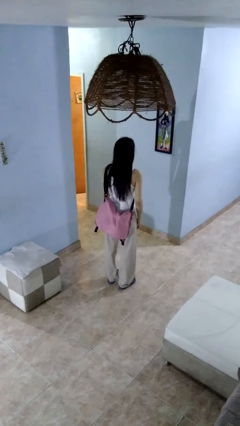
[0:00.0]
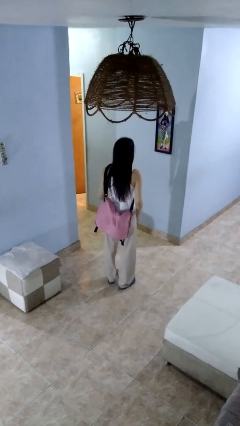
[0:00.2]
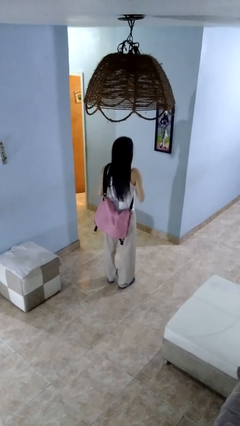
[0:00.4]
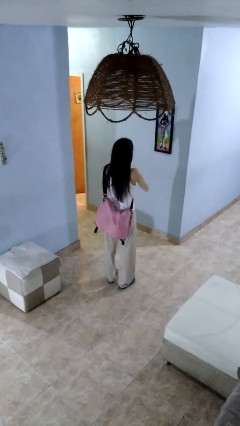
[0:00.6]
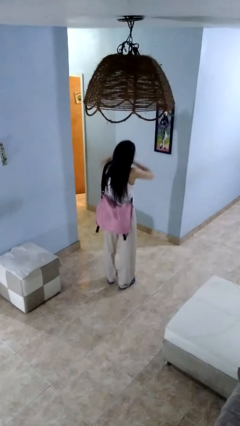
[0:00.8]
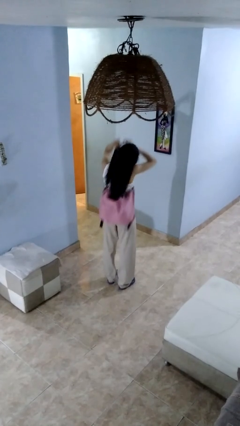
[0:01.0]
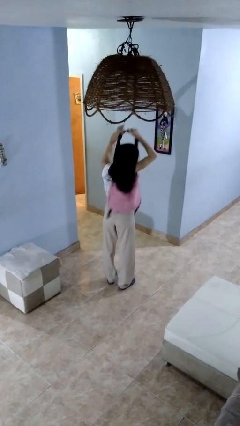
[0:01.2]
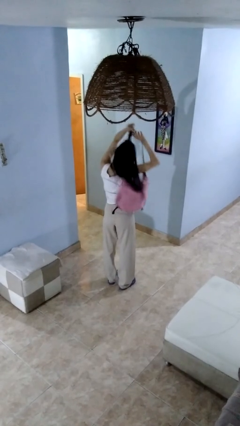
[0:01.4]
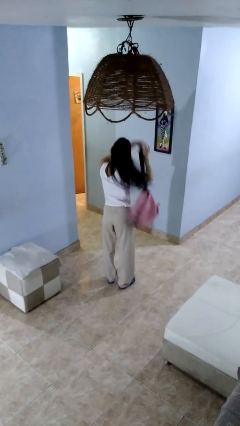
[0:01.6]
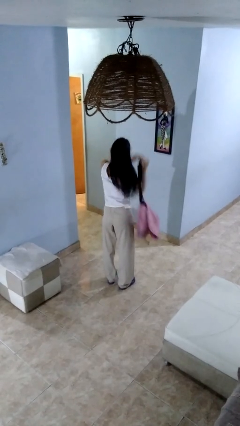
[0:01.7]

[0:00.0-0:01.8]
person takes off backpack

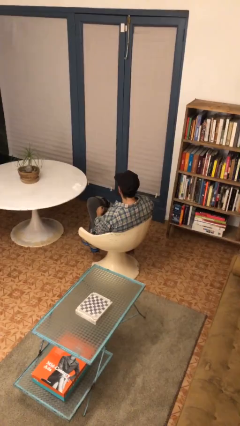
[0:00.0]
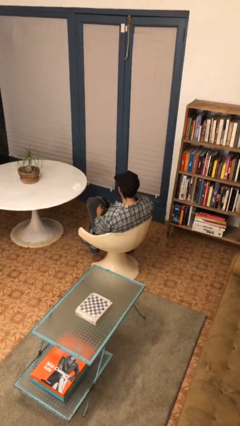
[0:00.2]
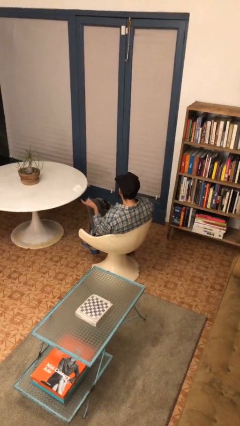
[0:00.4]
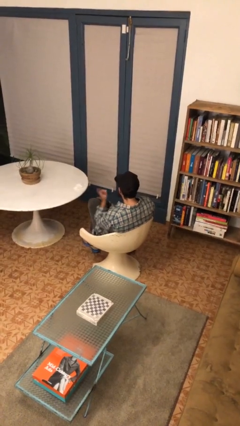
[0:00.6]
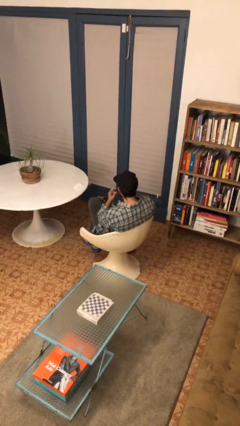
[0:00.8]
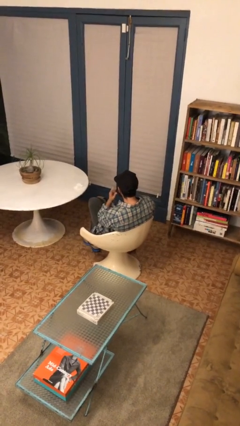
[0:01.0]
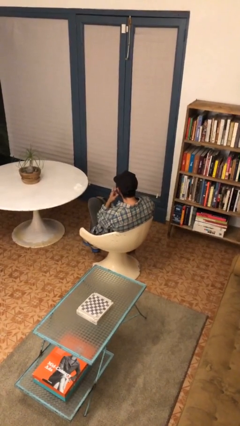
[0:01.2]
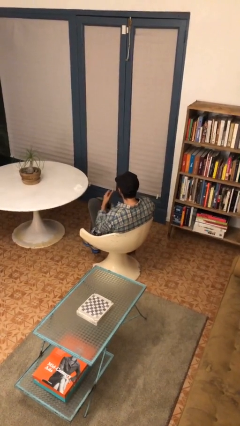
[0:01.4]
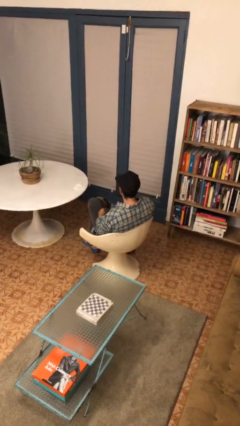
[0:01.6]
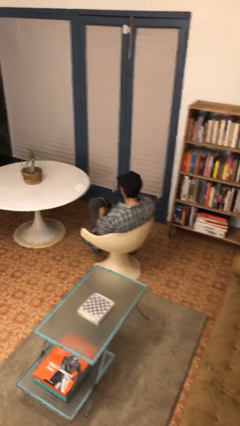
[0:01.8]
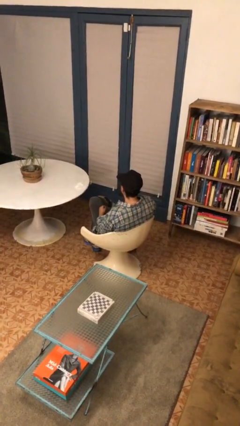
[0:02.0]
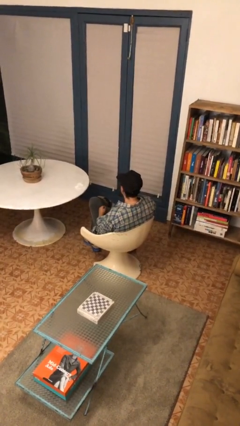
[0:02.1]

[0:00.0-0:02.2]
person gestures listen closely

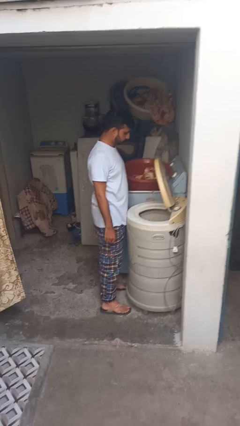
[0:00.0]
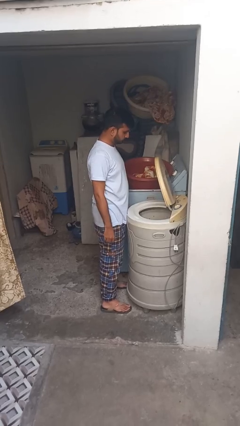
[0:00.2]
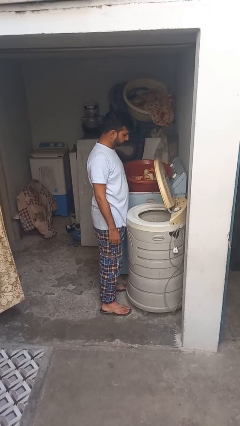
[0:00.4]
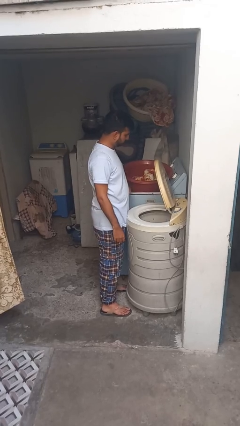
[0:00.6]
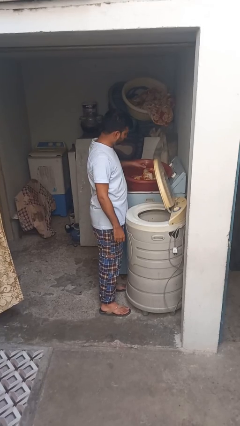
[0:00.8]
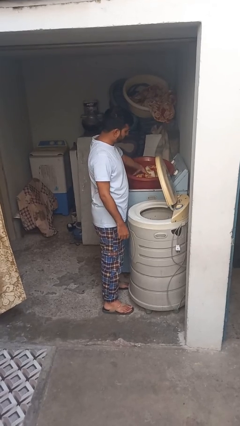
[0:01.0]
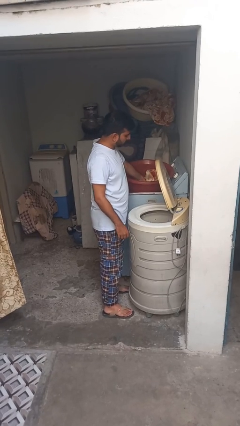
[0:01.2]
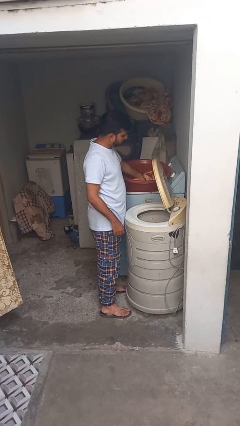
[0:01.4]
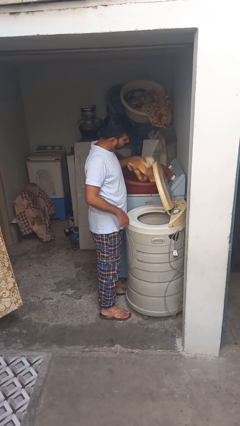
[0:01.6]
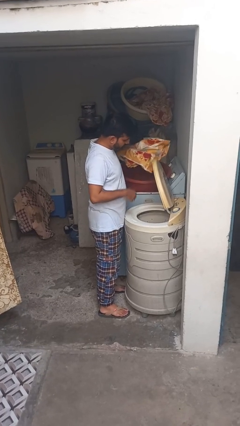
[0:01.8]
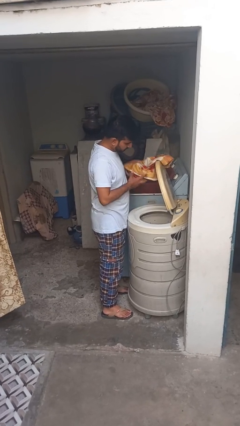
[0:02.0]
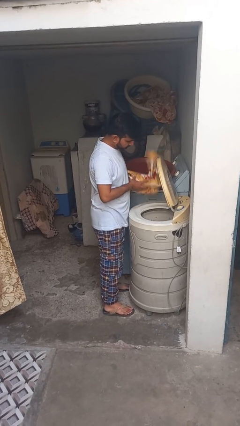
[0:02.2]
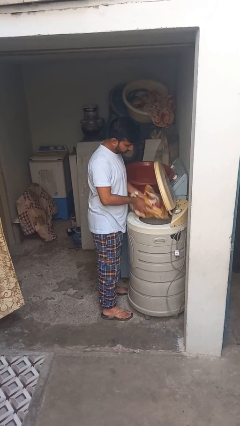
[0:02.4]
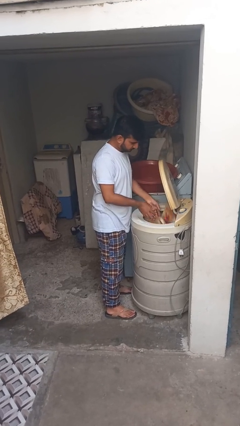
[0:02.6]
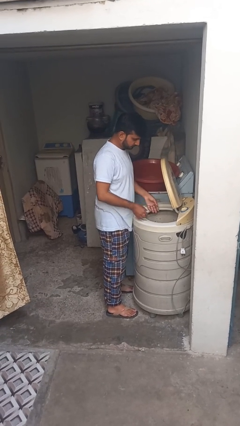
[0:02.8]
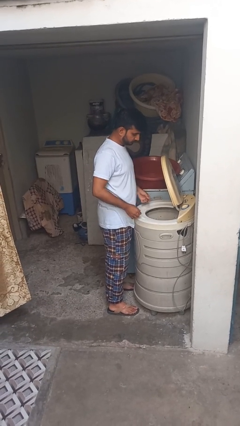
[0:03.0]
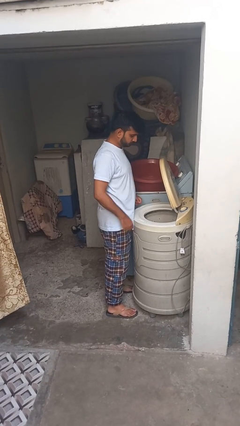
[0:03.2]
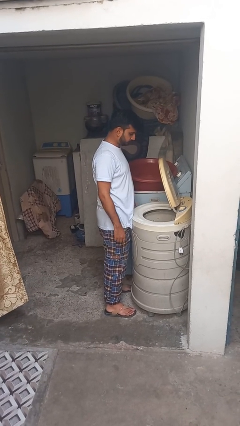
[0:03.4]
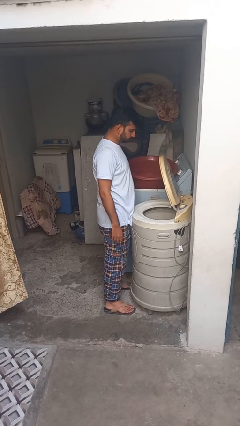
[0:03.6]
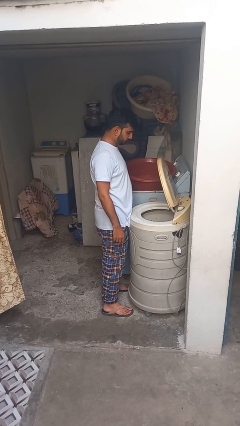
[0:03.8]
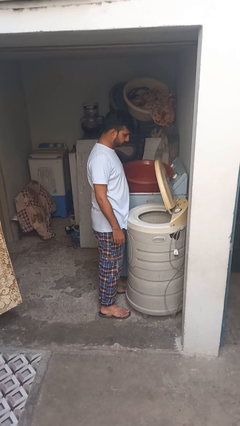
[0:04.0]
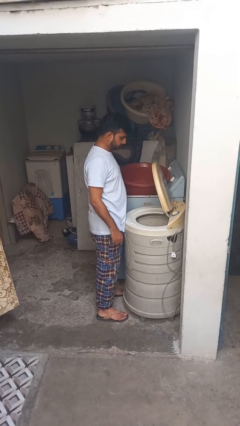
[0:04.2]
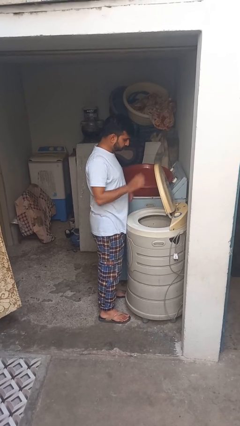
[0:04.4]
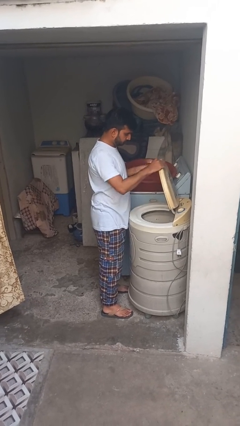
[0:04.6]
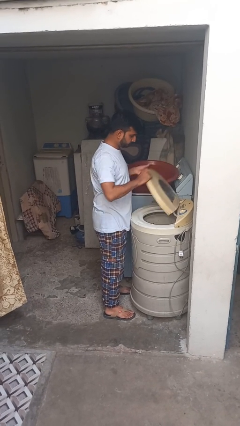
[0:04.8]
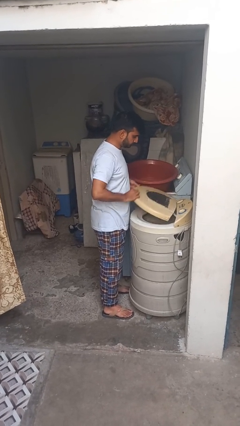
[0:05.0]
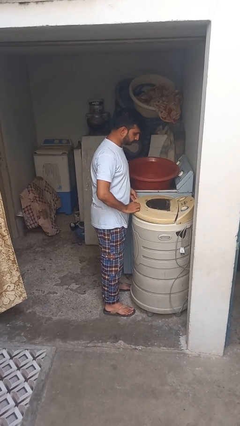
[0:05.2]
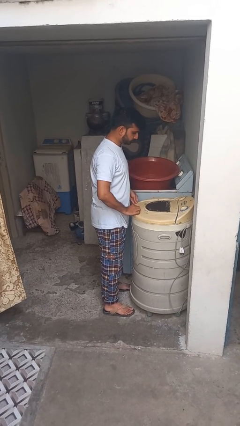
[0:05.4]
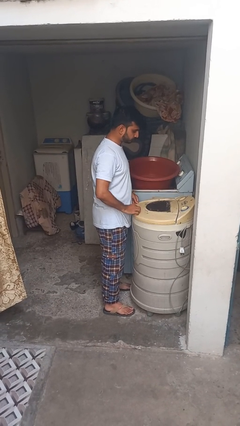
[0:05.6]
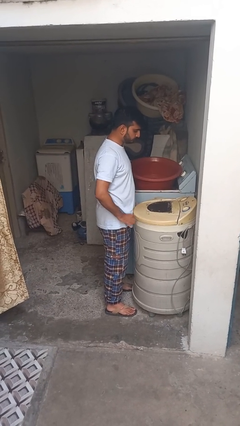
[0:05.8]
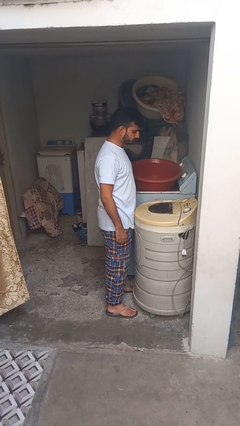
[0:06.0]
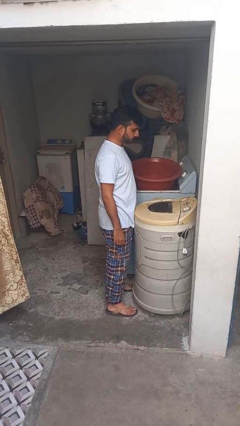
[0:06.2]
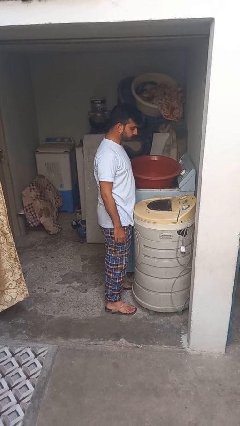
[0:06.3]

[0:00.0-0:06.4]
person loads clotheswasher

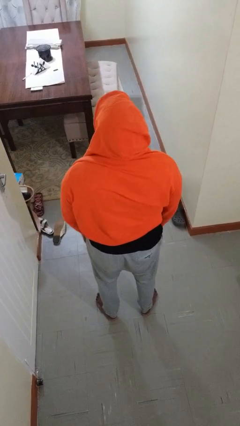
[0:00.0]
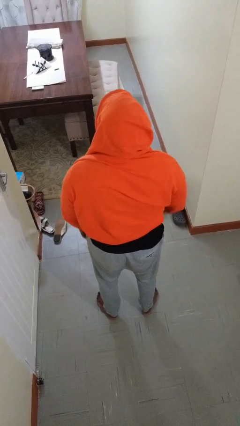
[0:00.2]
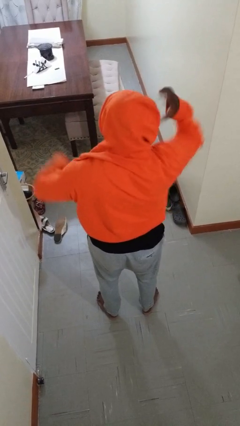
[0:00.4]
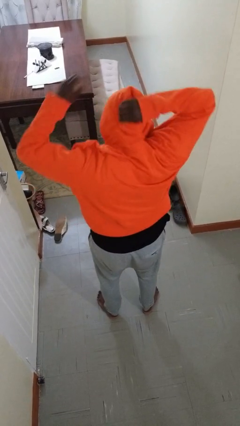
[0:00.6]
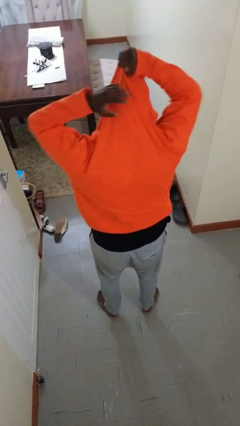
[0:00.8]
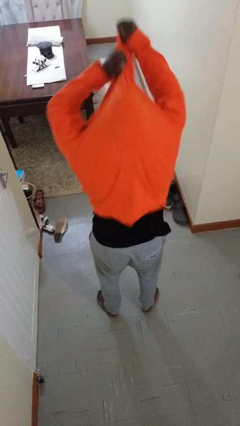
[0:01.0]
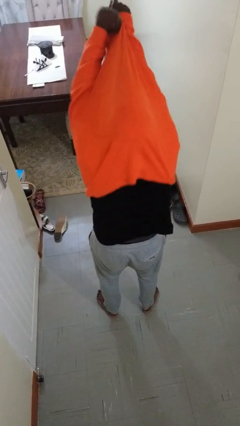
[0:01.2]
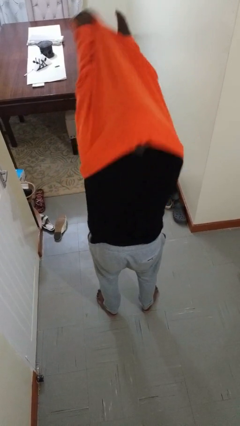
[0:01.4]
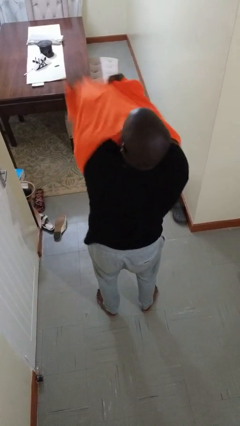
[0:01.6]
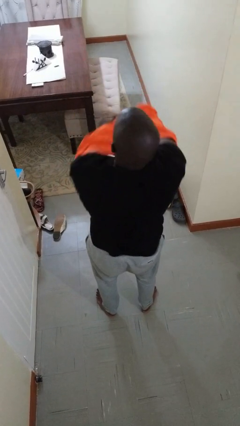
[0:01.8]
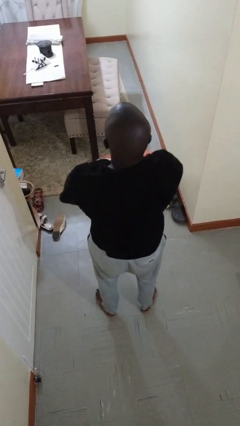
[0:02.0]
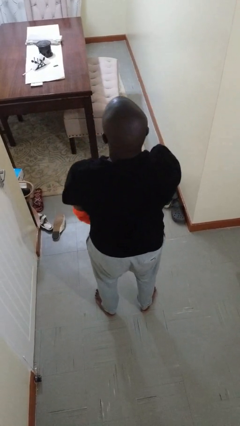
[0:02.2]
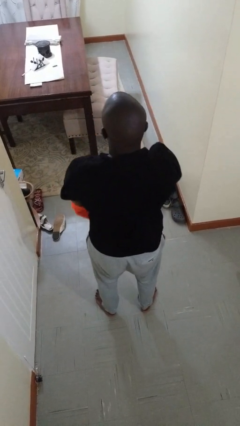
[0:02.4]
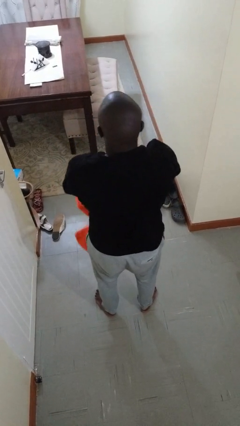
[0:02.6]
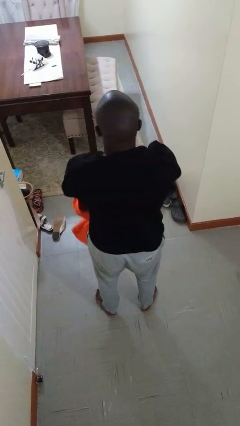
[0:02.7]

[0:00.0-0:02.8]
person takes off hoodie

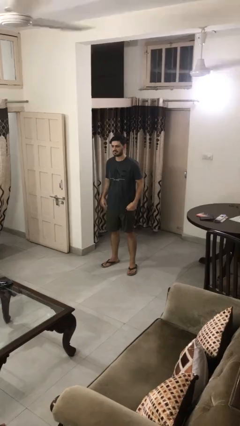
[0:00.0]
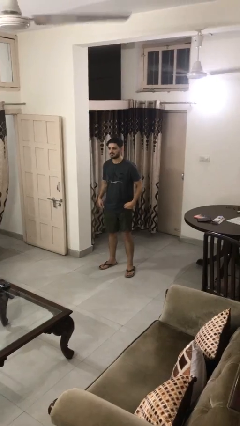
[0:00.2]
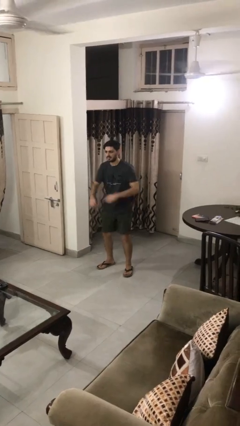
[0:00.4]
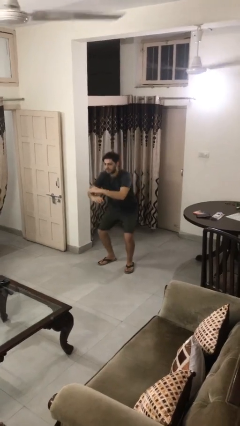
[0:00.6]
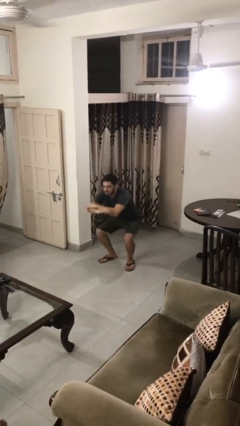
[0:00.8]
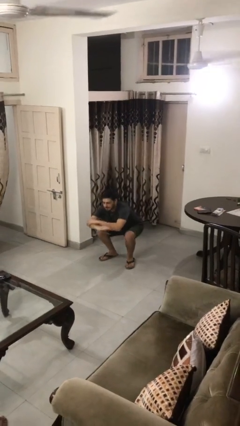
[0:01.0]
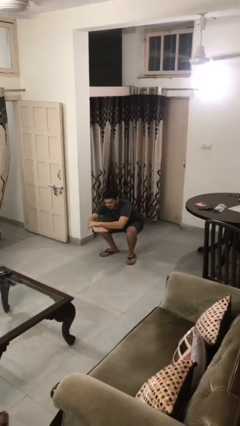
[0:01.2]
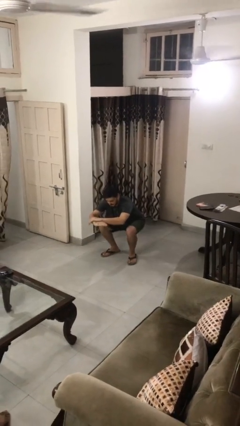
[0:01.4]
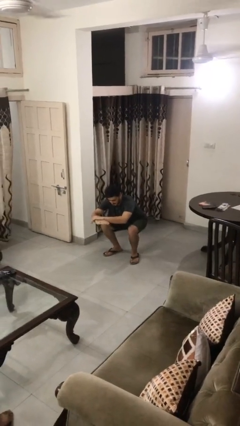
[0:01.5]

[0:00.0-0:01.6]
person squats

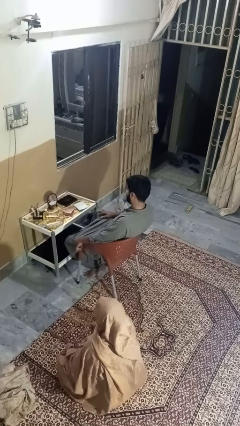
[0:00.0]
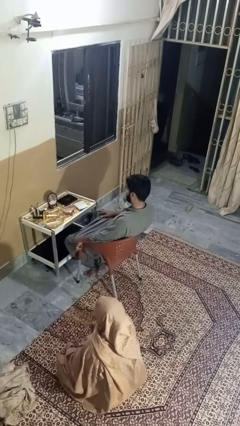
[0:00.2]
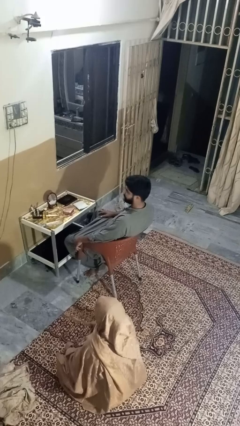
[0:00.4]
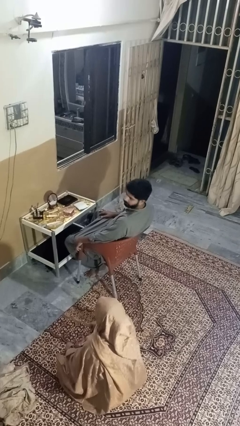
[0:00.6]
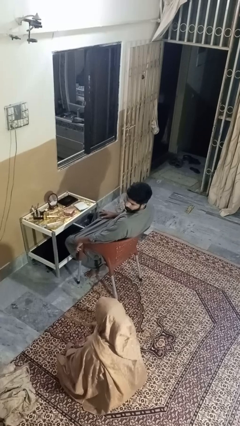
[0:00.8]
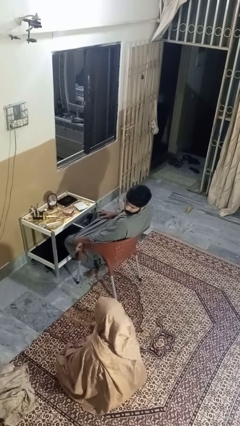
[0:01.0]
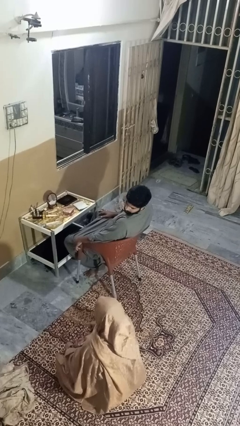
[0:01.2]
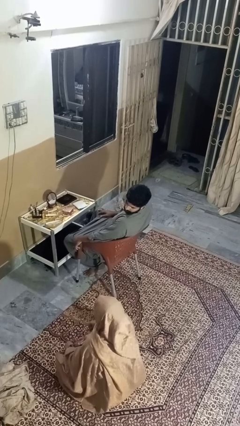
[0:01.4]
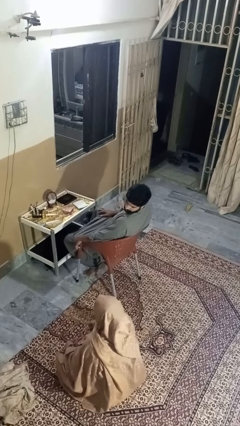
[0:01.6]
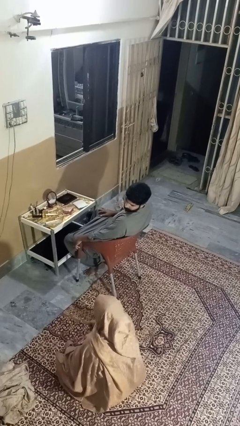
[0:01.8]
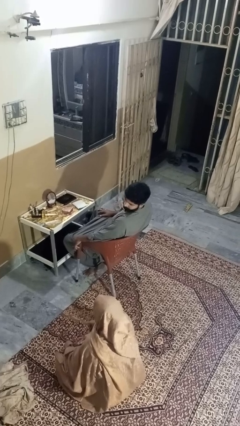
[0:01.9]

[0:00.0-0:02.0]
person looks over shoulder

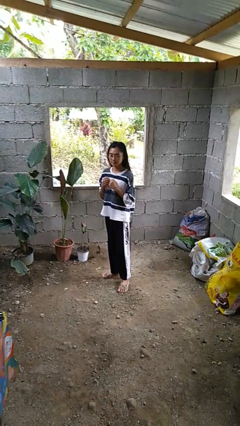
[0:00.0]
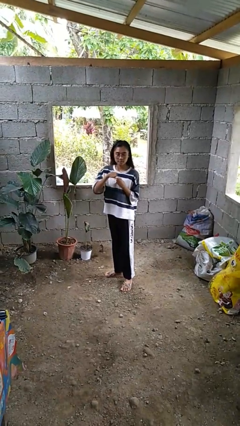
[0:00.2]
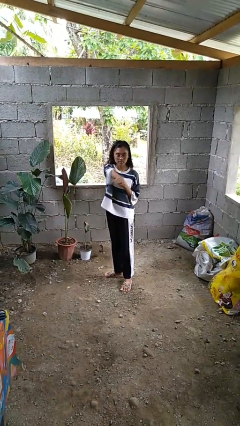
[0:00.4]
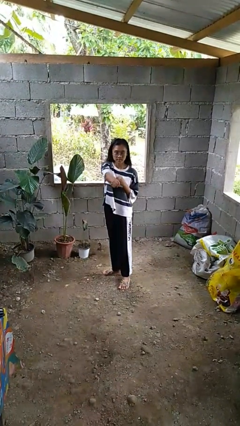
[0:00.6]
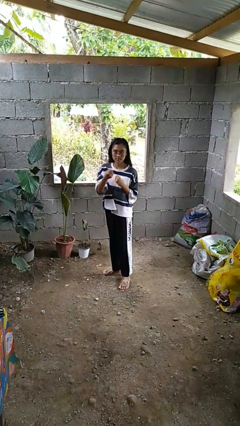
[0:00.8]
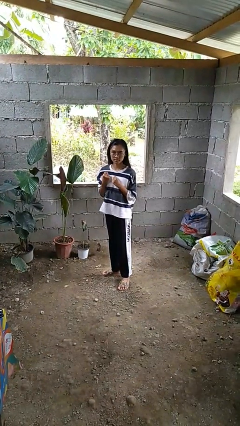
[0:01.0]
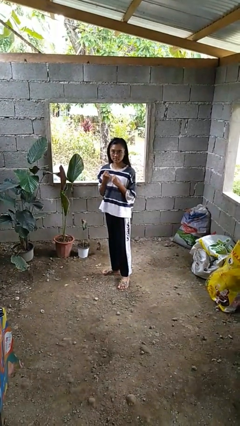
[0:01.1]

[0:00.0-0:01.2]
person karate chop
